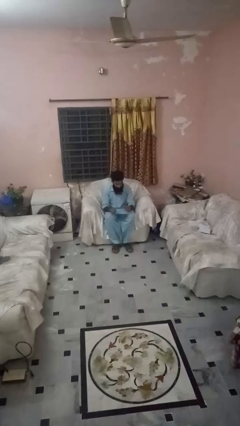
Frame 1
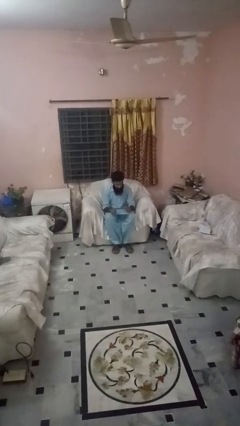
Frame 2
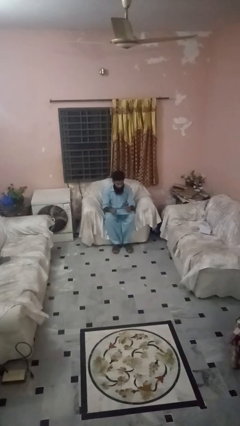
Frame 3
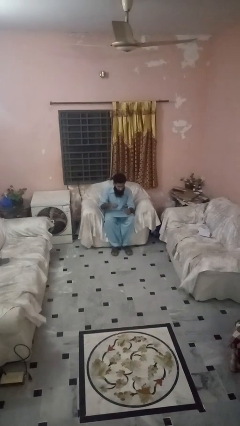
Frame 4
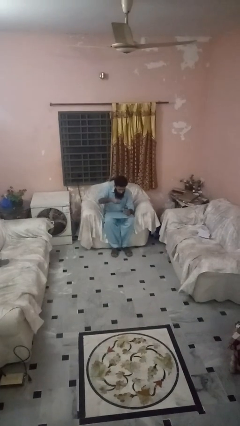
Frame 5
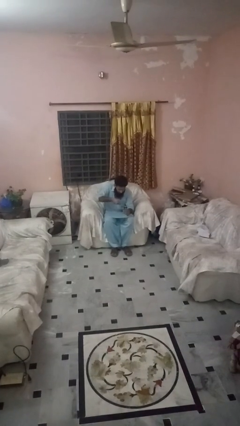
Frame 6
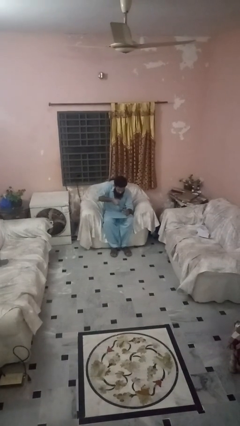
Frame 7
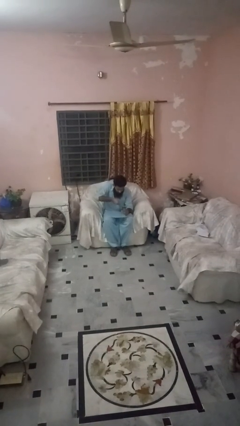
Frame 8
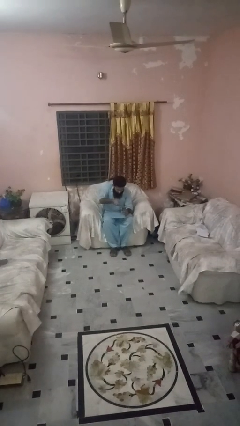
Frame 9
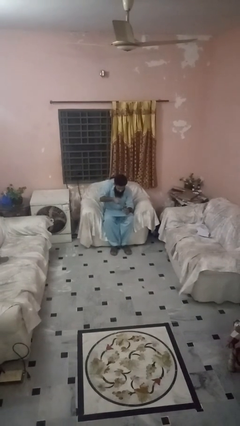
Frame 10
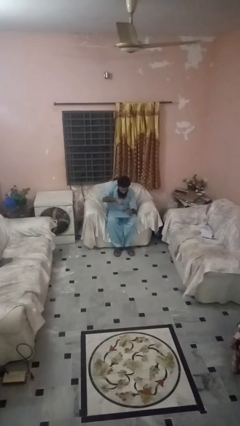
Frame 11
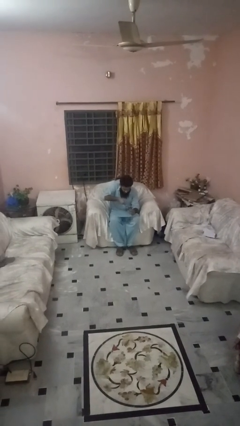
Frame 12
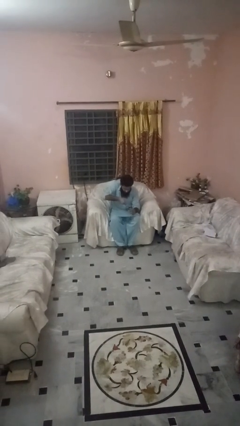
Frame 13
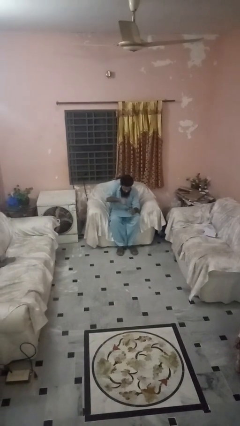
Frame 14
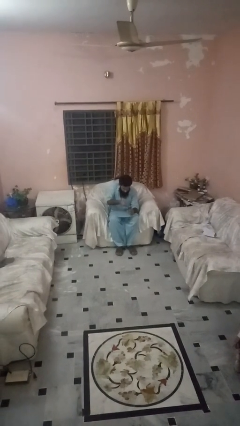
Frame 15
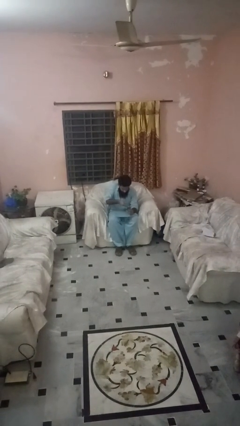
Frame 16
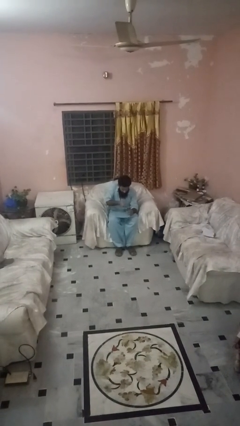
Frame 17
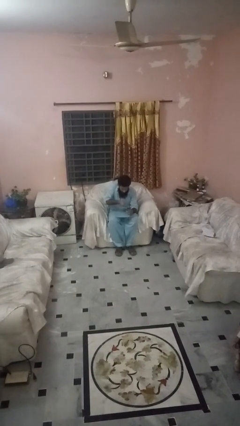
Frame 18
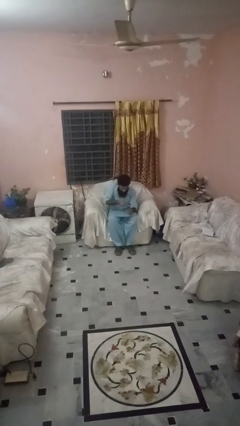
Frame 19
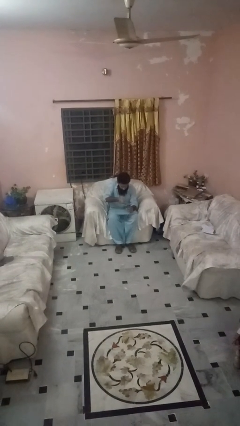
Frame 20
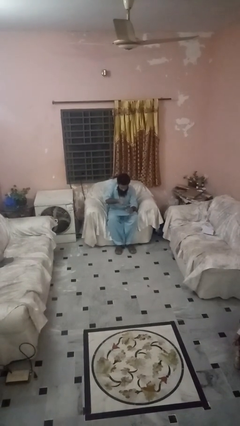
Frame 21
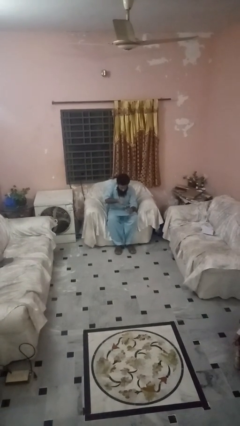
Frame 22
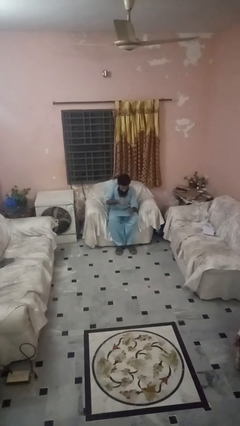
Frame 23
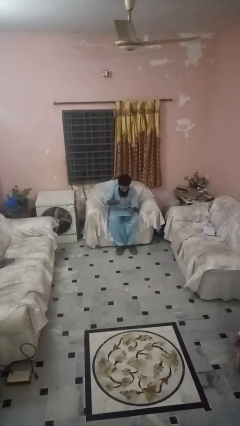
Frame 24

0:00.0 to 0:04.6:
person opens can with can opener

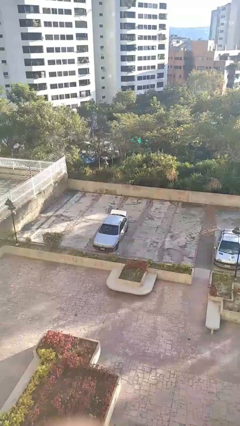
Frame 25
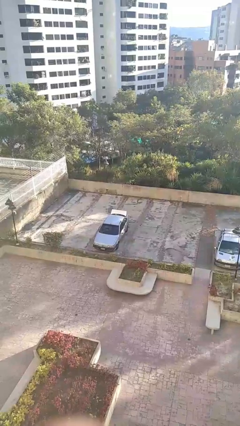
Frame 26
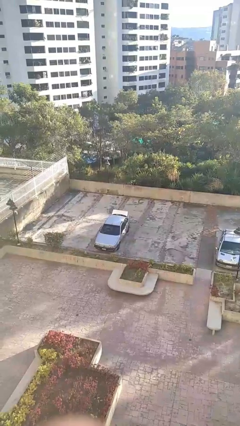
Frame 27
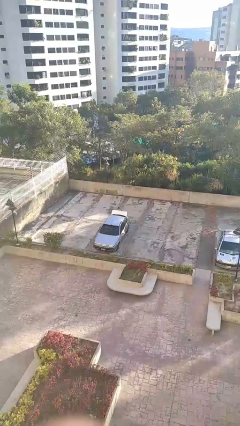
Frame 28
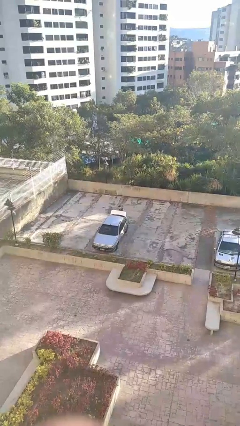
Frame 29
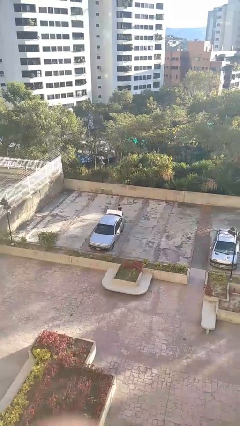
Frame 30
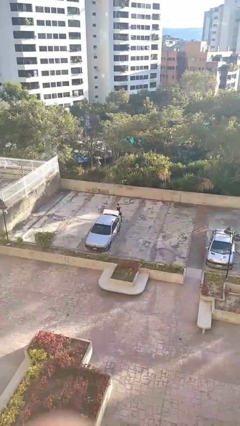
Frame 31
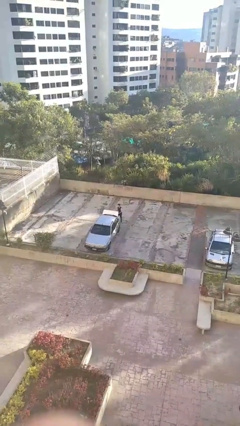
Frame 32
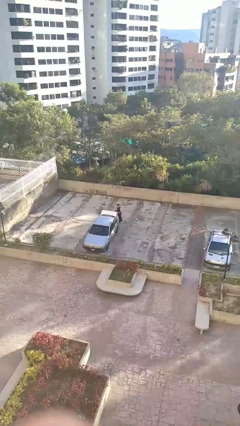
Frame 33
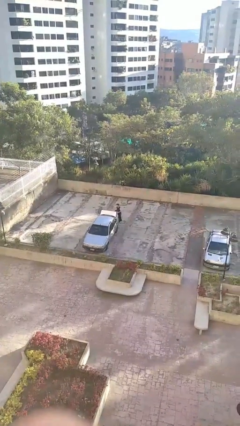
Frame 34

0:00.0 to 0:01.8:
person unloads car

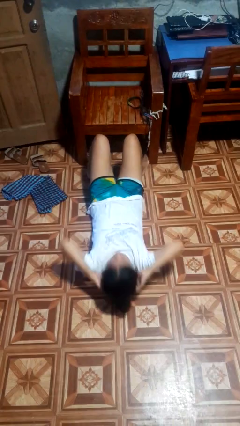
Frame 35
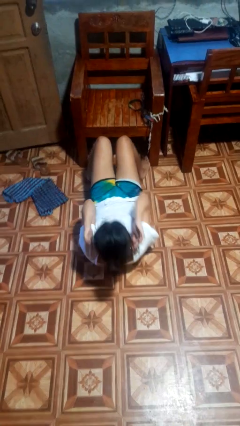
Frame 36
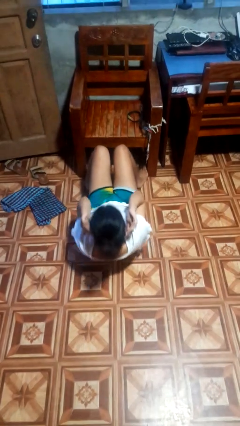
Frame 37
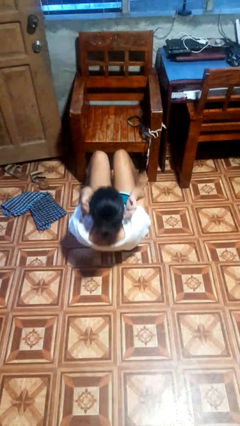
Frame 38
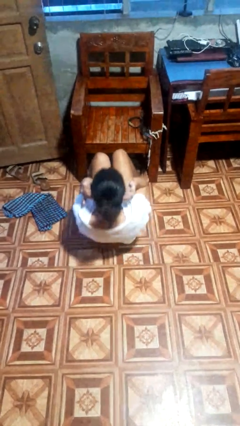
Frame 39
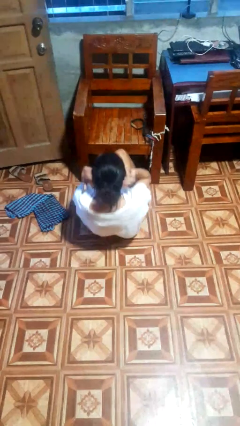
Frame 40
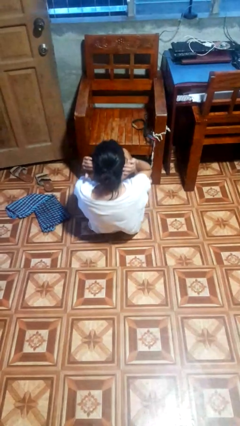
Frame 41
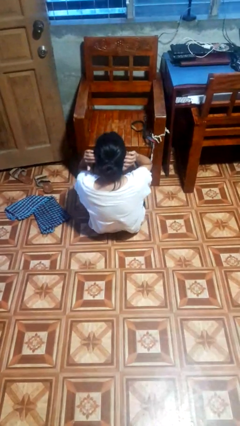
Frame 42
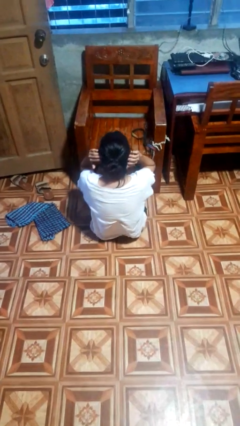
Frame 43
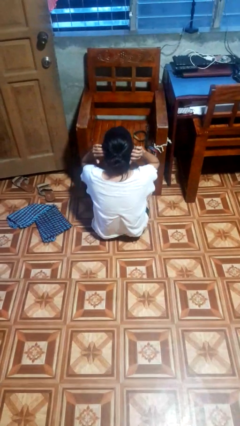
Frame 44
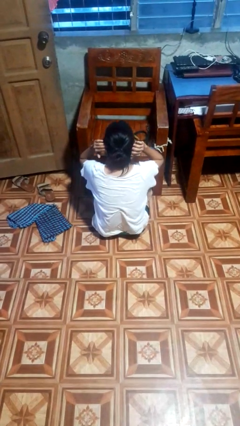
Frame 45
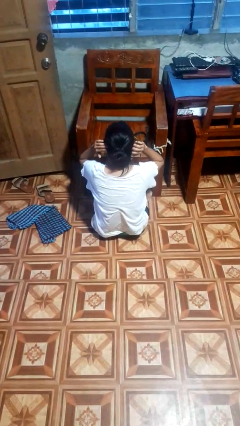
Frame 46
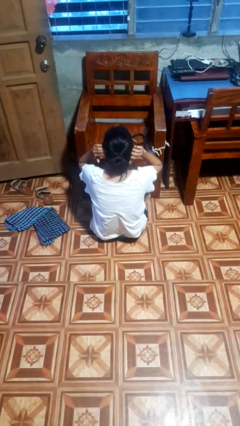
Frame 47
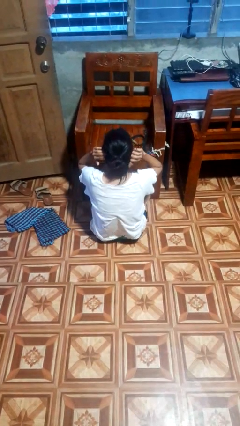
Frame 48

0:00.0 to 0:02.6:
person exercises with situp

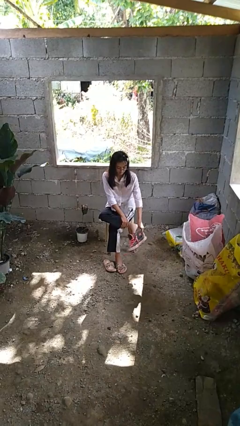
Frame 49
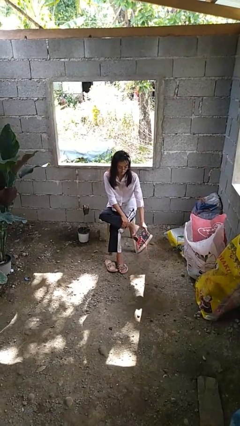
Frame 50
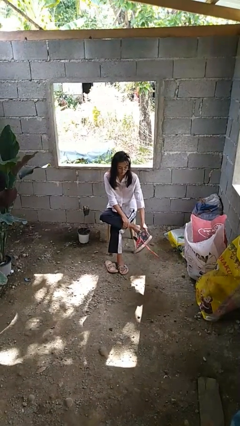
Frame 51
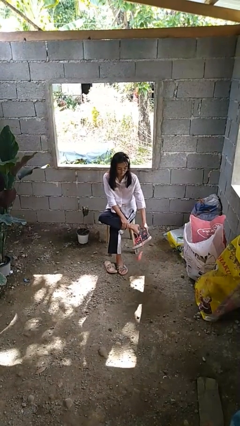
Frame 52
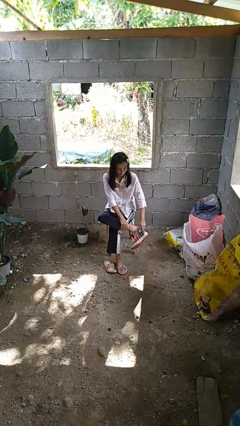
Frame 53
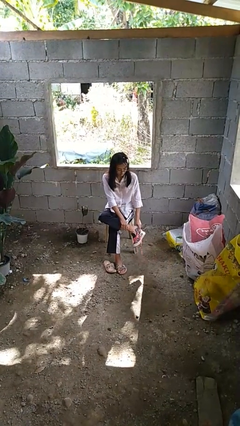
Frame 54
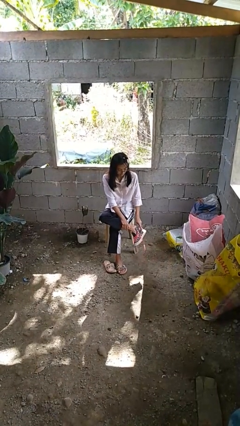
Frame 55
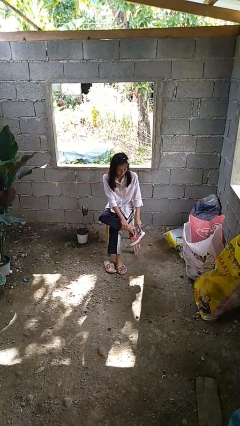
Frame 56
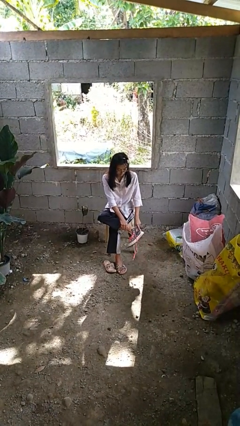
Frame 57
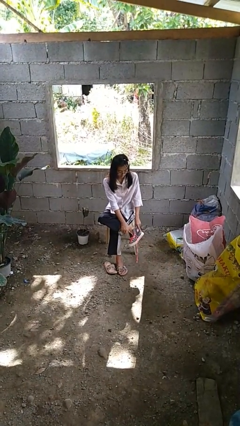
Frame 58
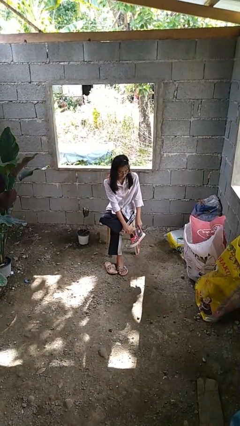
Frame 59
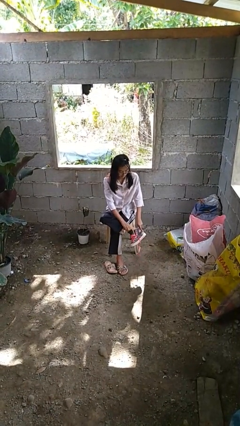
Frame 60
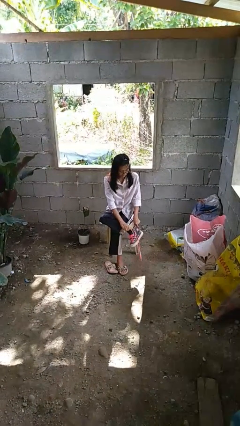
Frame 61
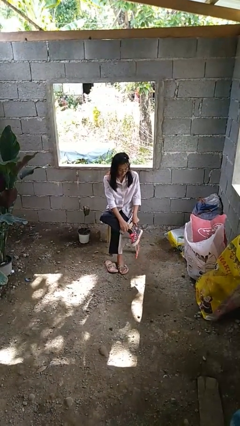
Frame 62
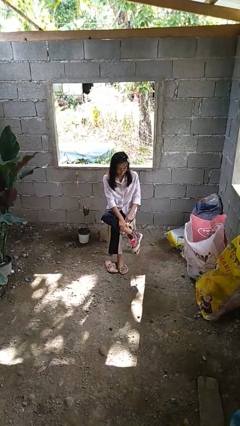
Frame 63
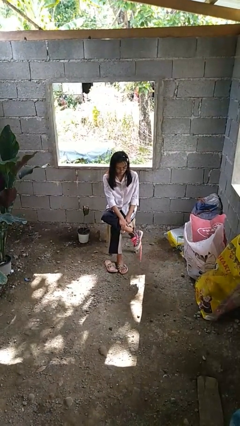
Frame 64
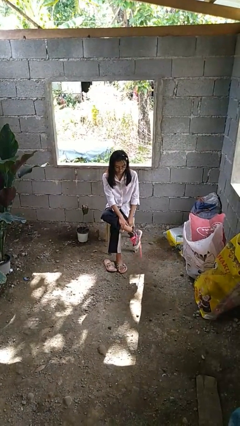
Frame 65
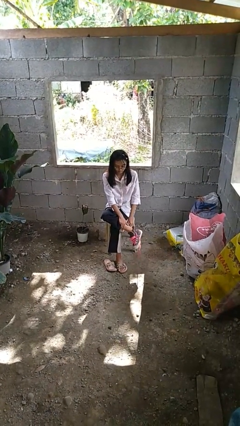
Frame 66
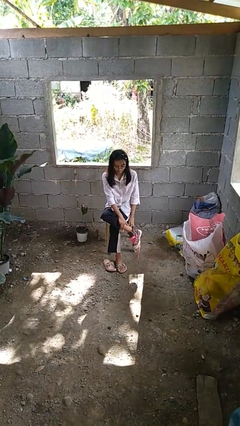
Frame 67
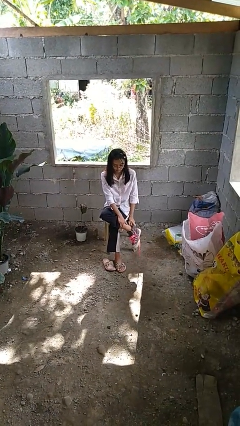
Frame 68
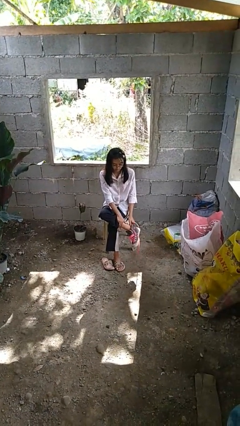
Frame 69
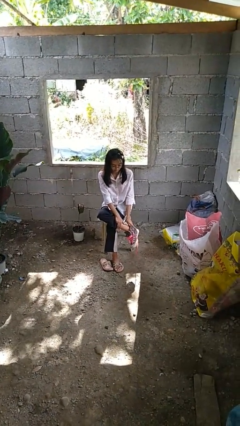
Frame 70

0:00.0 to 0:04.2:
person puts on shoes

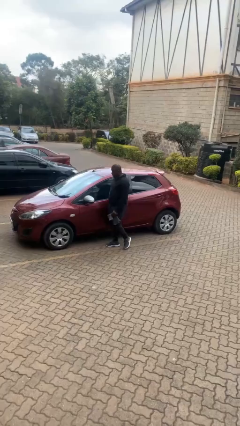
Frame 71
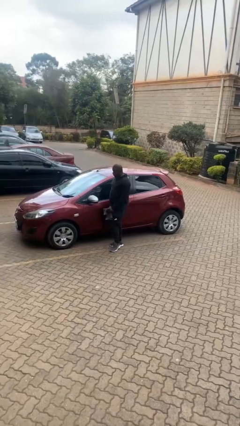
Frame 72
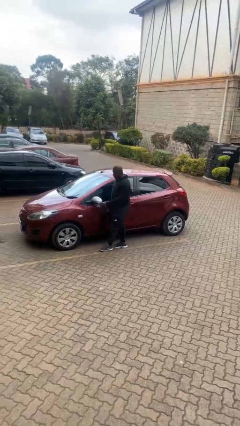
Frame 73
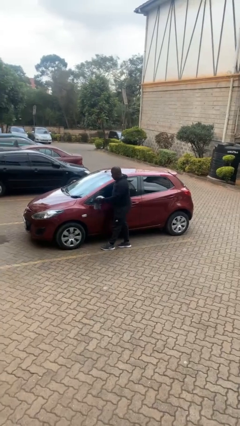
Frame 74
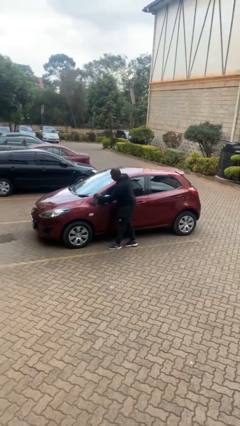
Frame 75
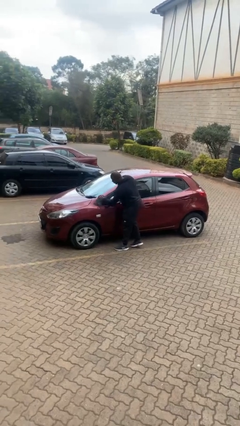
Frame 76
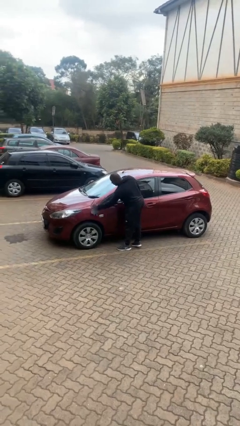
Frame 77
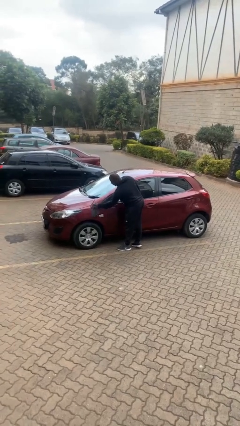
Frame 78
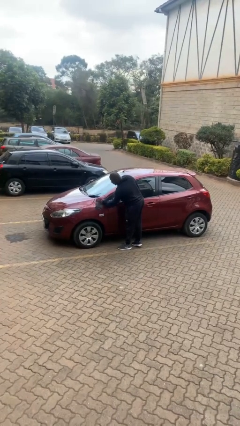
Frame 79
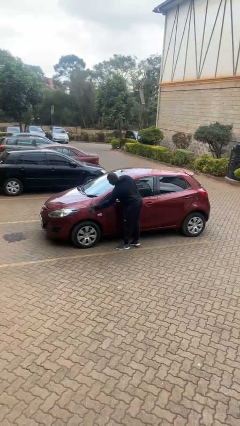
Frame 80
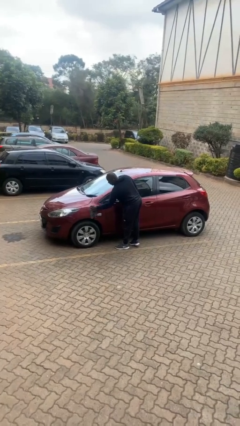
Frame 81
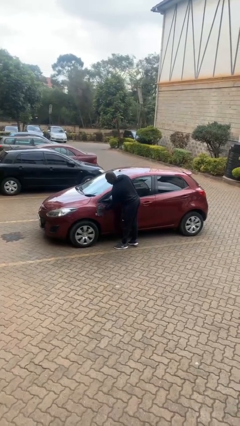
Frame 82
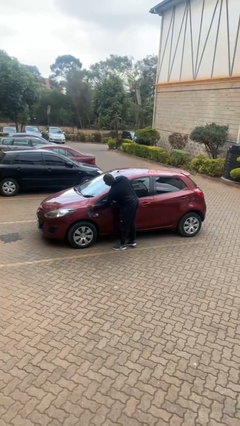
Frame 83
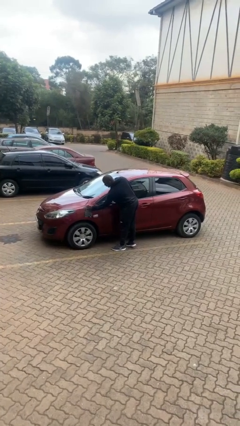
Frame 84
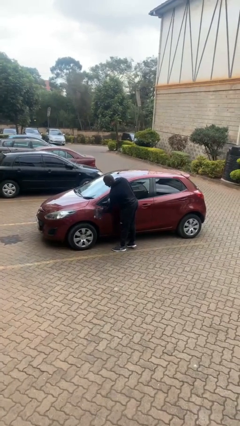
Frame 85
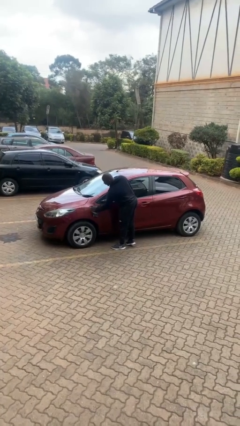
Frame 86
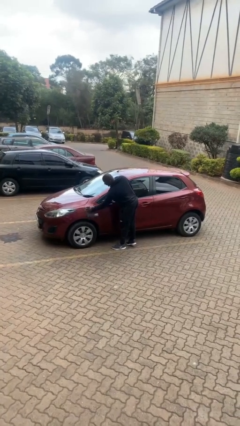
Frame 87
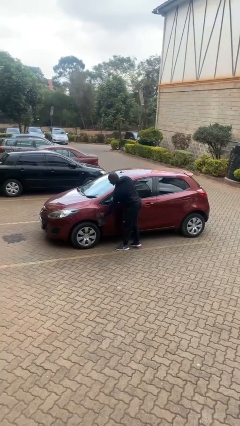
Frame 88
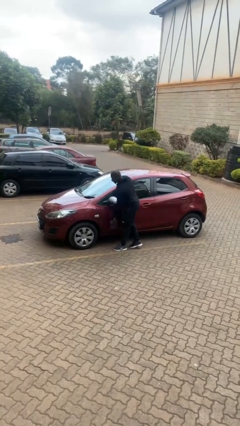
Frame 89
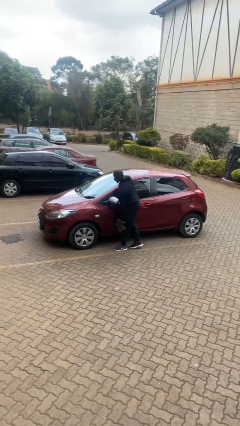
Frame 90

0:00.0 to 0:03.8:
person polishes car with rag

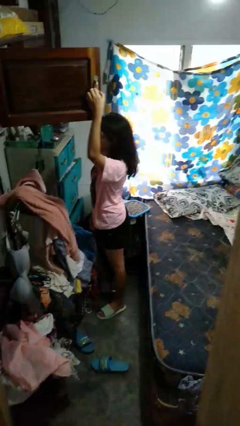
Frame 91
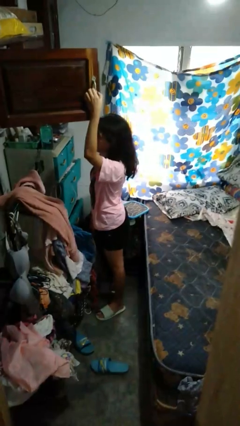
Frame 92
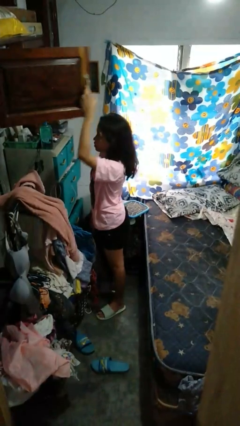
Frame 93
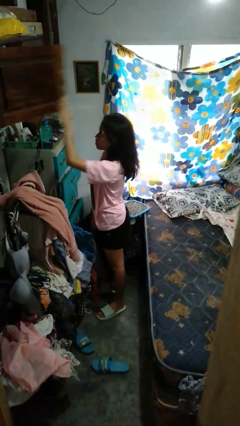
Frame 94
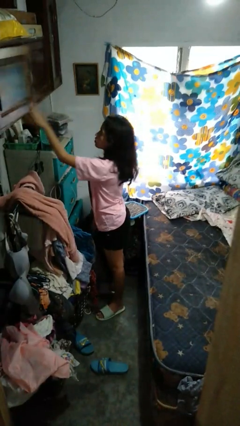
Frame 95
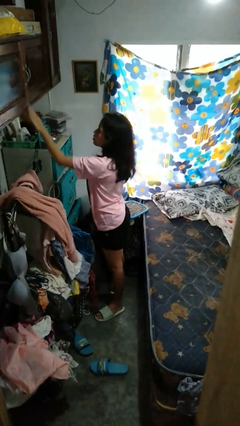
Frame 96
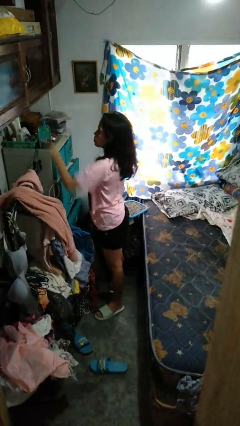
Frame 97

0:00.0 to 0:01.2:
person closes closet door
